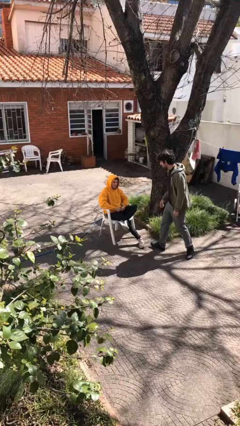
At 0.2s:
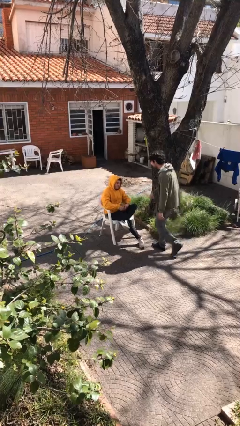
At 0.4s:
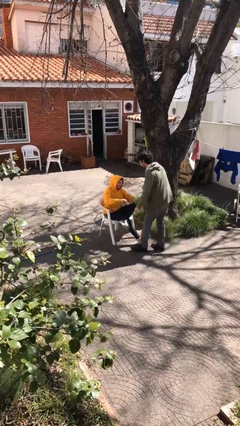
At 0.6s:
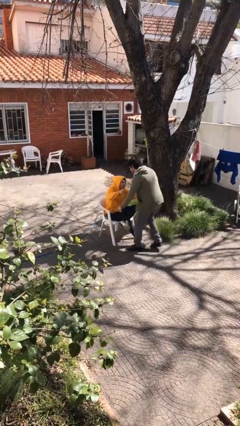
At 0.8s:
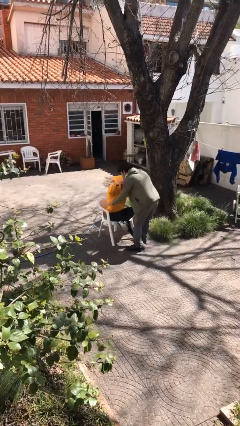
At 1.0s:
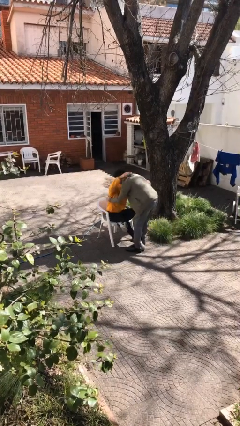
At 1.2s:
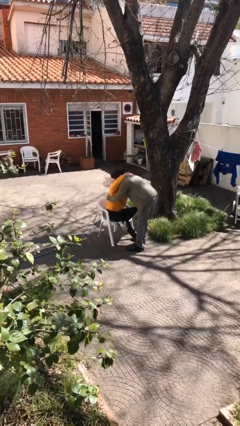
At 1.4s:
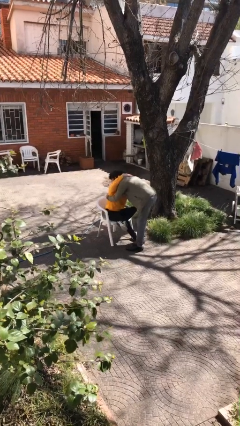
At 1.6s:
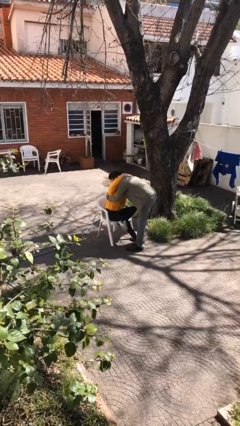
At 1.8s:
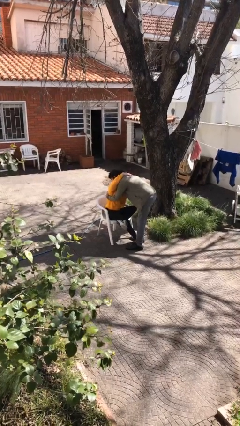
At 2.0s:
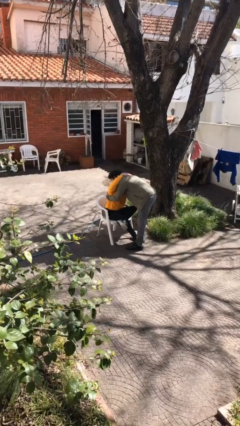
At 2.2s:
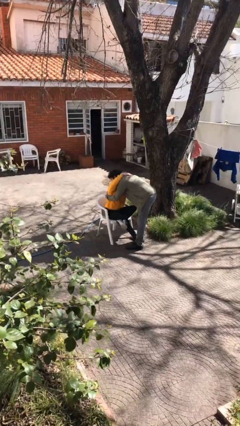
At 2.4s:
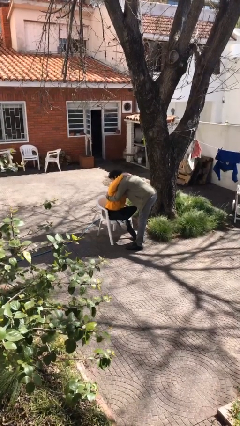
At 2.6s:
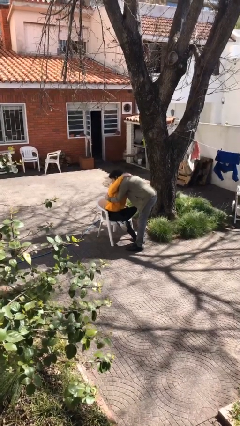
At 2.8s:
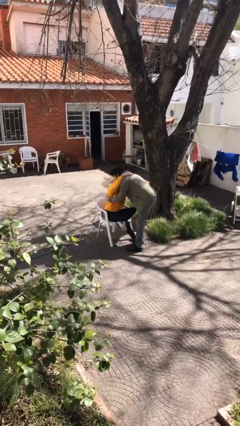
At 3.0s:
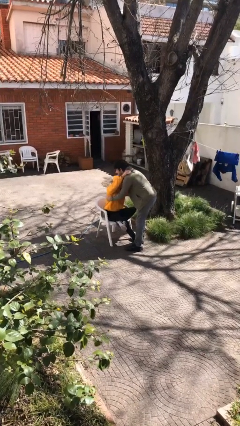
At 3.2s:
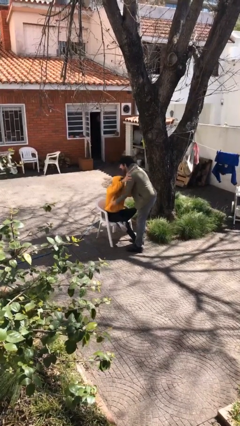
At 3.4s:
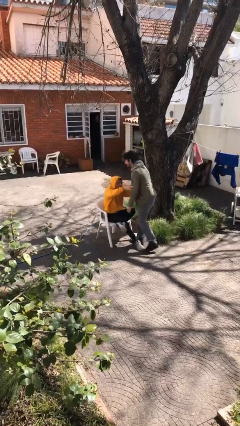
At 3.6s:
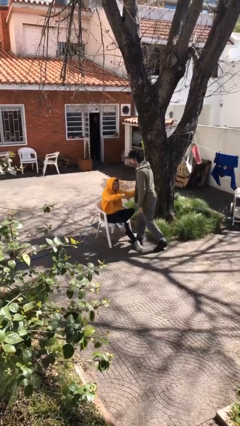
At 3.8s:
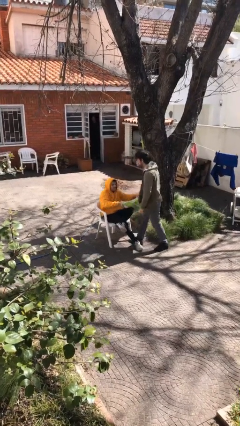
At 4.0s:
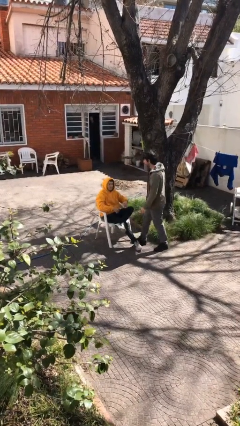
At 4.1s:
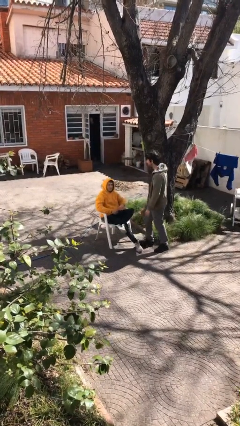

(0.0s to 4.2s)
person embraces person

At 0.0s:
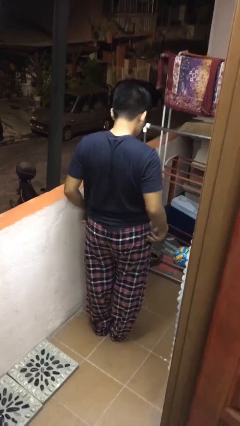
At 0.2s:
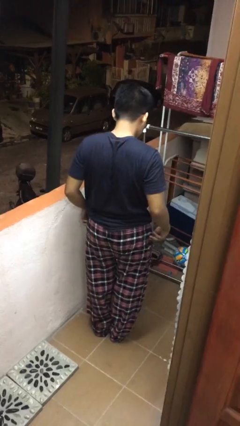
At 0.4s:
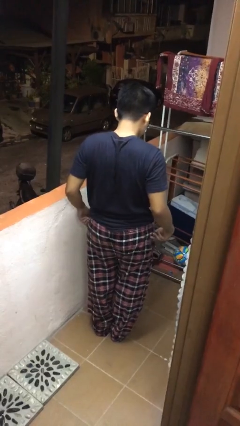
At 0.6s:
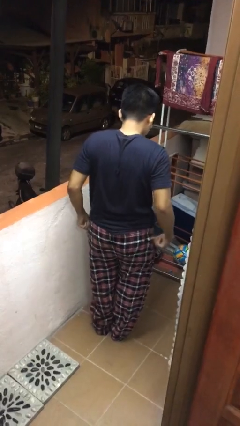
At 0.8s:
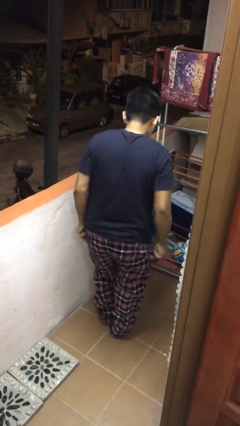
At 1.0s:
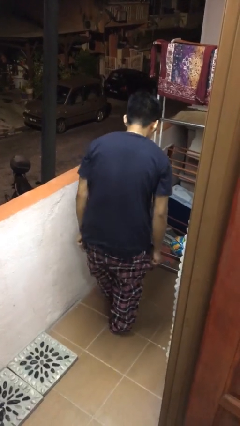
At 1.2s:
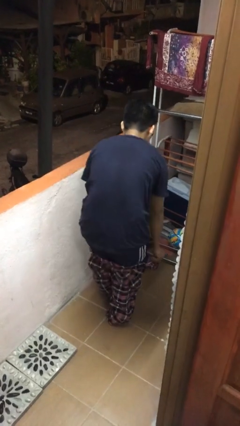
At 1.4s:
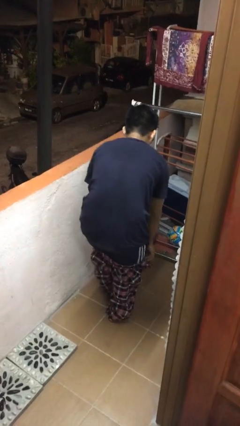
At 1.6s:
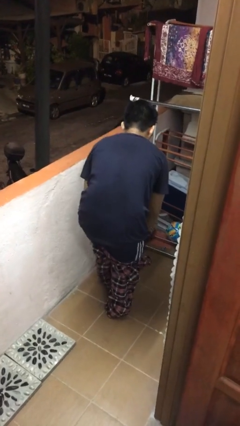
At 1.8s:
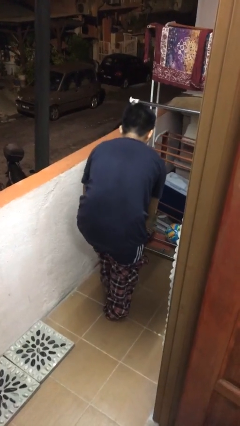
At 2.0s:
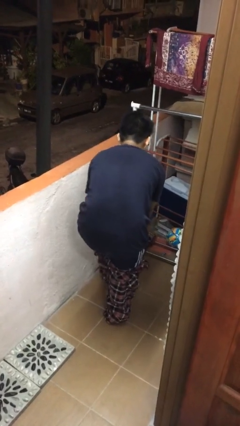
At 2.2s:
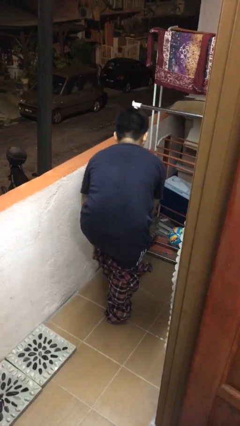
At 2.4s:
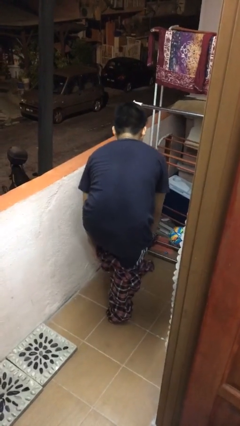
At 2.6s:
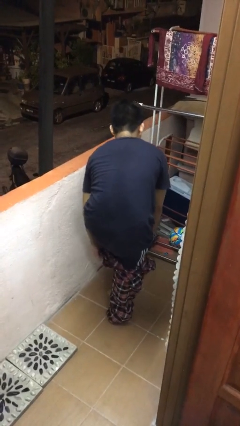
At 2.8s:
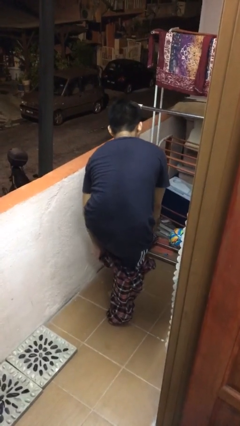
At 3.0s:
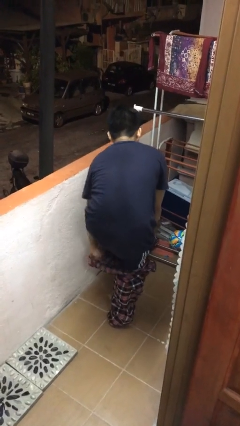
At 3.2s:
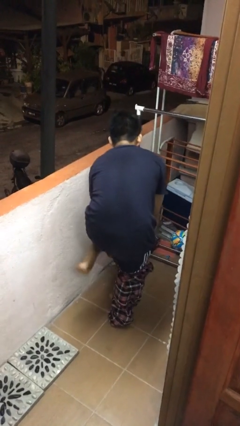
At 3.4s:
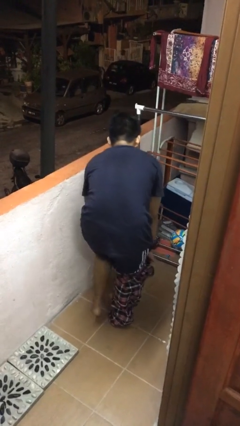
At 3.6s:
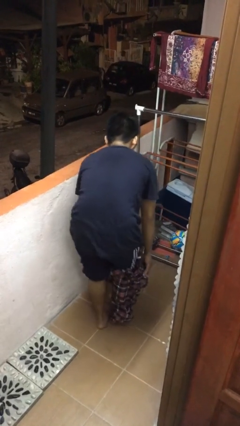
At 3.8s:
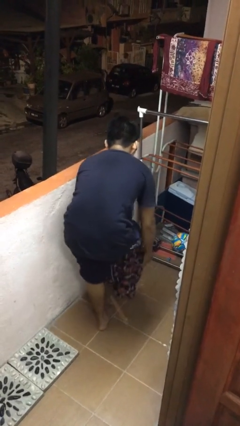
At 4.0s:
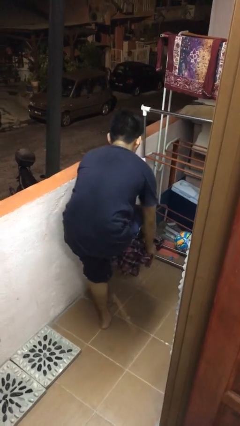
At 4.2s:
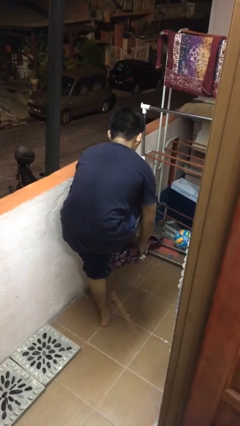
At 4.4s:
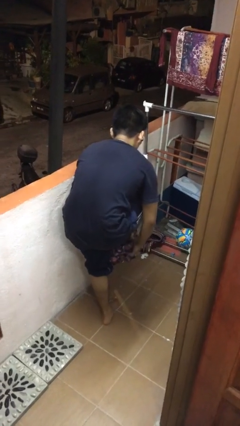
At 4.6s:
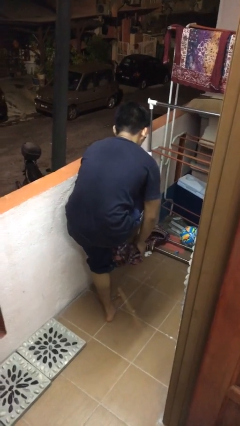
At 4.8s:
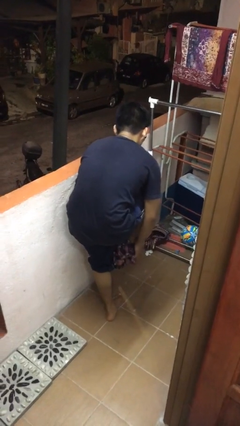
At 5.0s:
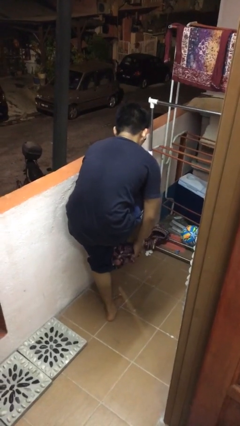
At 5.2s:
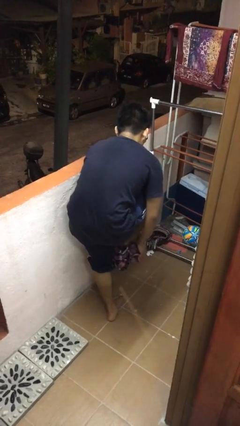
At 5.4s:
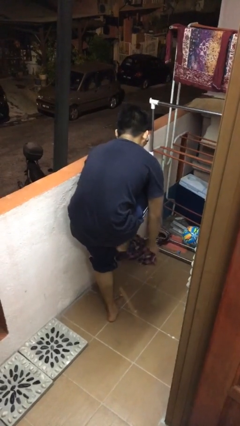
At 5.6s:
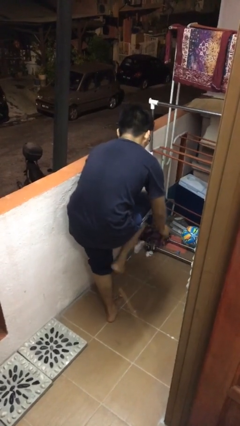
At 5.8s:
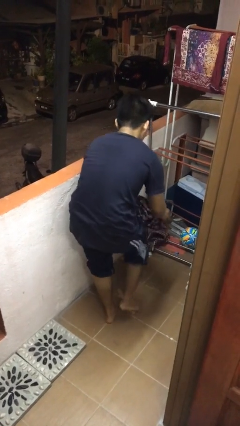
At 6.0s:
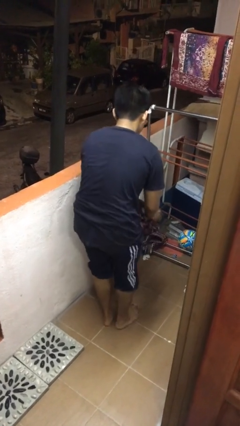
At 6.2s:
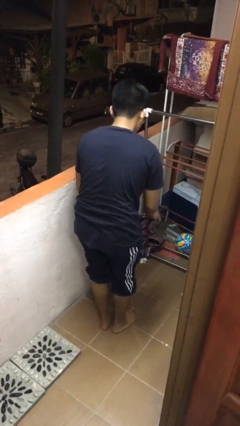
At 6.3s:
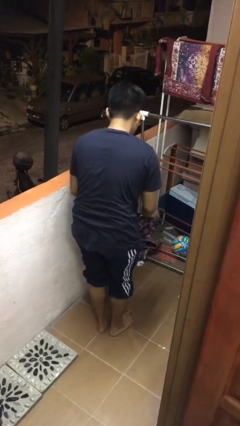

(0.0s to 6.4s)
person takes off pants

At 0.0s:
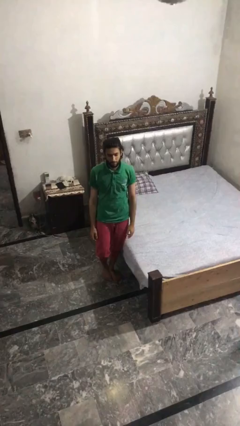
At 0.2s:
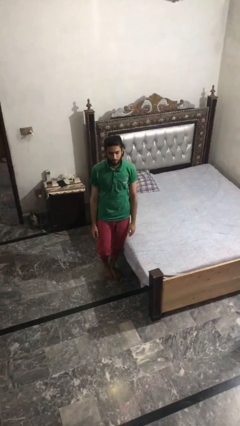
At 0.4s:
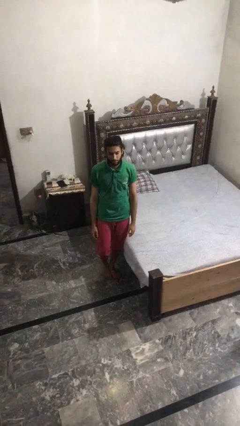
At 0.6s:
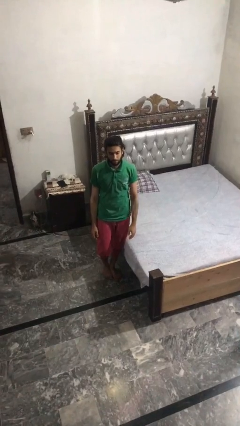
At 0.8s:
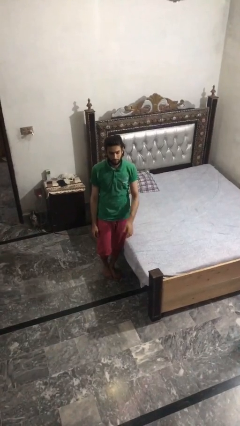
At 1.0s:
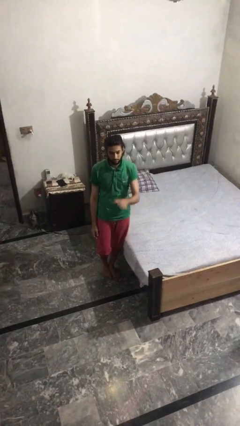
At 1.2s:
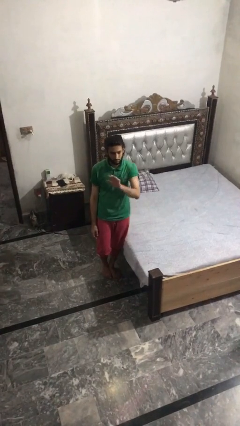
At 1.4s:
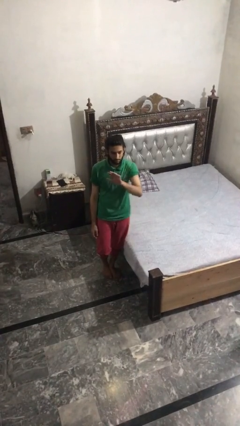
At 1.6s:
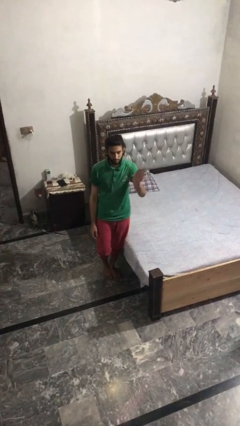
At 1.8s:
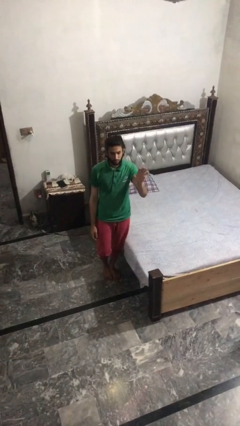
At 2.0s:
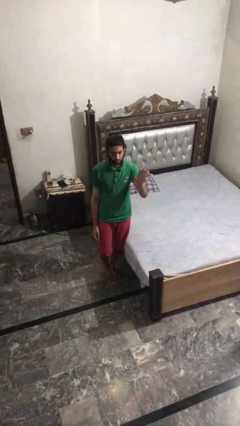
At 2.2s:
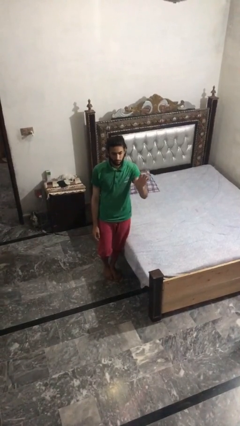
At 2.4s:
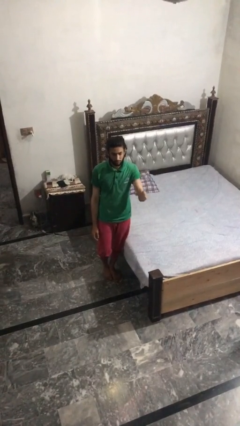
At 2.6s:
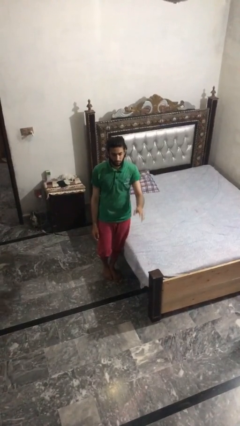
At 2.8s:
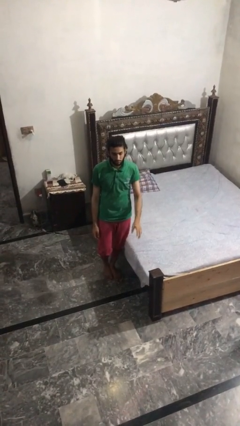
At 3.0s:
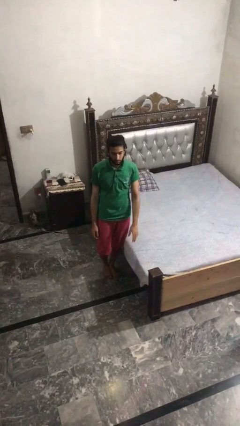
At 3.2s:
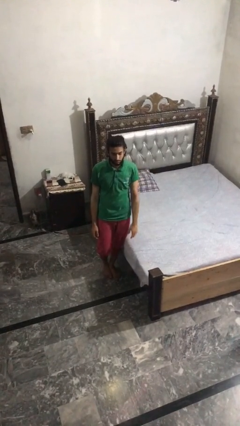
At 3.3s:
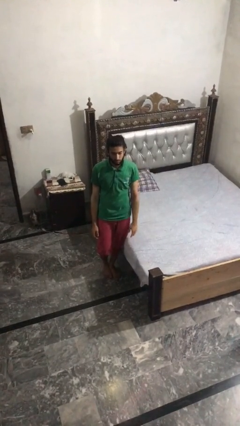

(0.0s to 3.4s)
person gestures swipe right

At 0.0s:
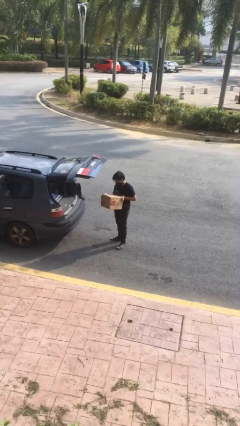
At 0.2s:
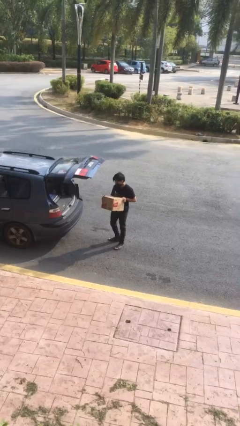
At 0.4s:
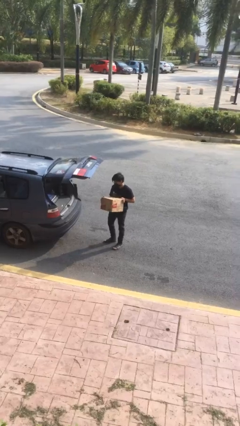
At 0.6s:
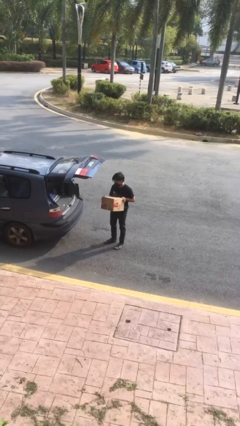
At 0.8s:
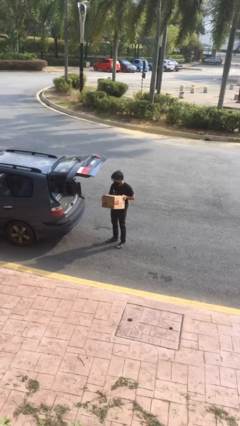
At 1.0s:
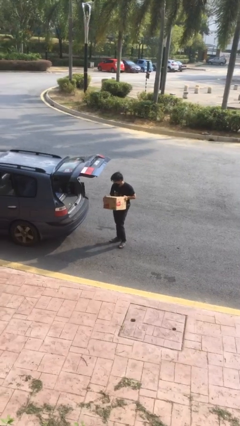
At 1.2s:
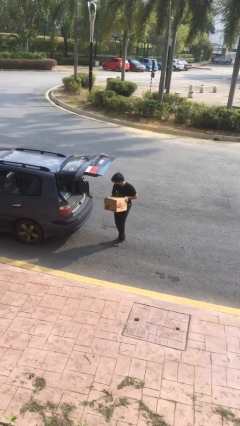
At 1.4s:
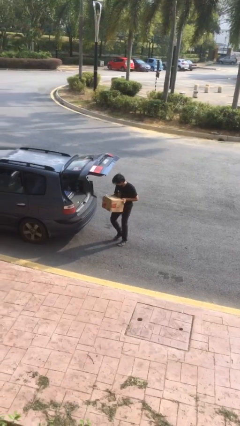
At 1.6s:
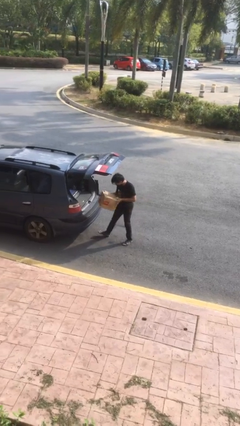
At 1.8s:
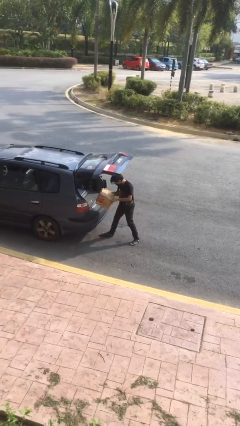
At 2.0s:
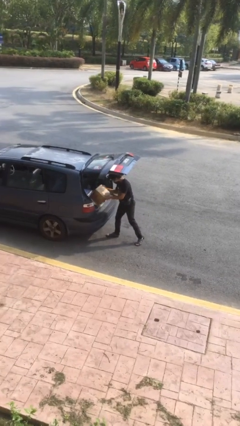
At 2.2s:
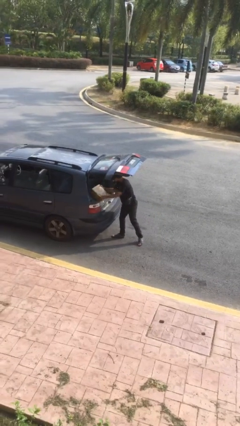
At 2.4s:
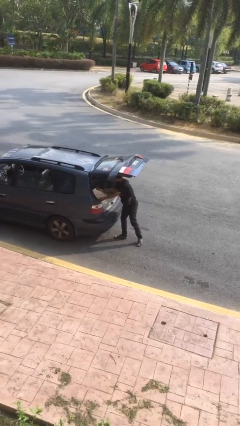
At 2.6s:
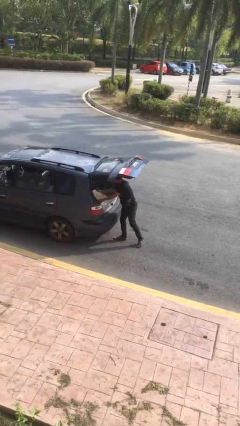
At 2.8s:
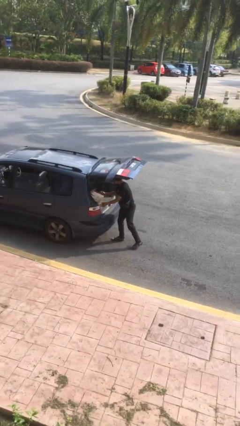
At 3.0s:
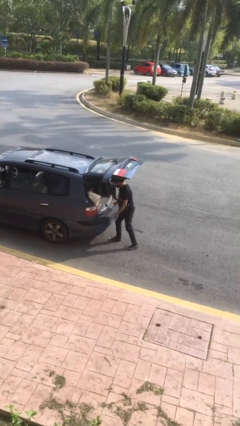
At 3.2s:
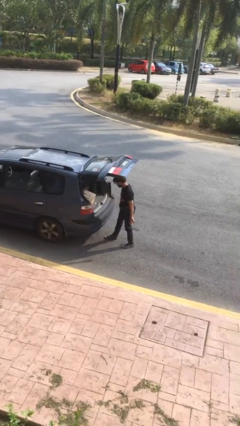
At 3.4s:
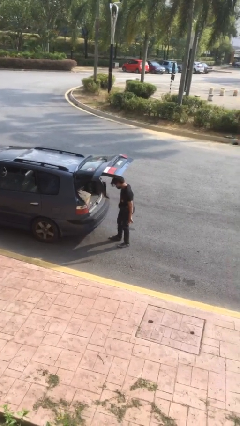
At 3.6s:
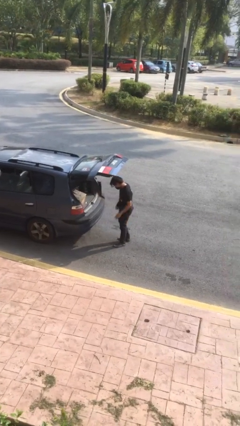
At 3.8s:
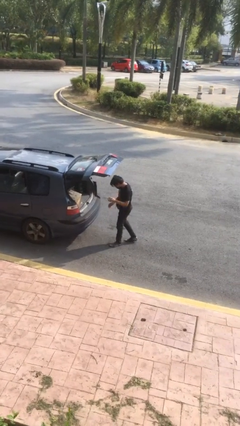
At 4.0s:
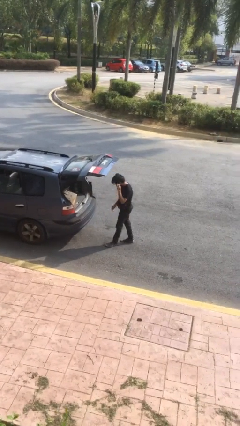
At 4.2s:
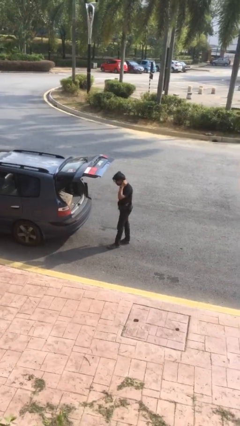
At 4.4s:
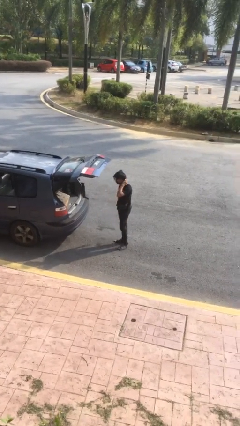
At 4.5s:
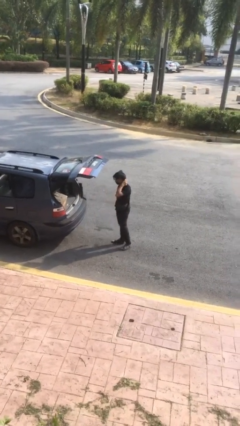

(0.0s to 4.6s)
person loads car
